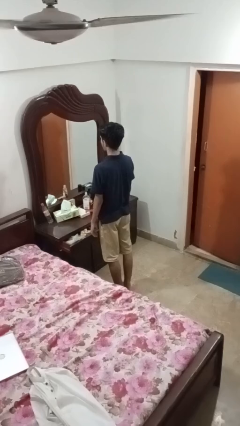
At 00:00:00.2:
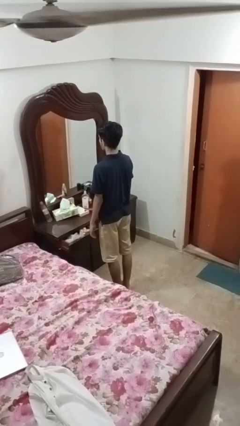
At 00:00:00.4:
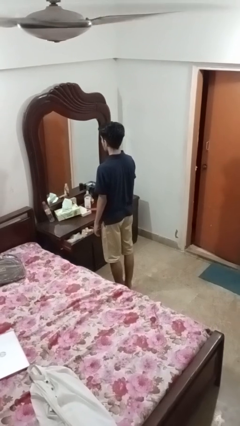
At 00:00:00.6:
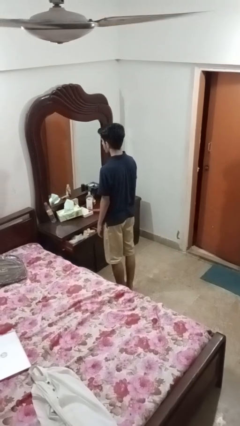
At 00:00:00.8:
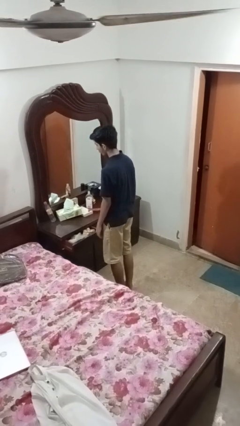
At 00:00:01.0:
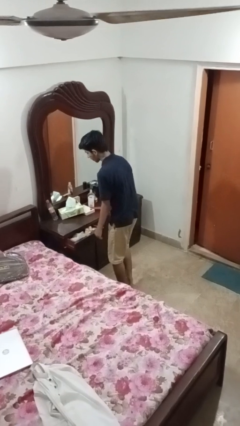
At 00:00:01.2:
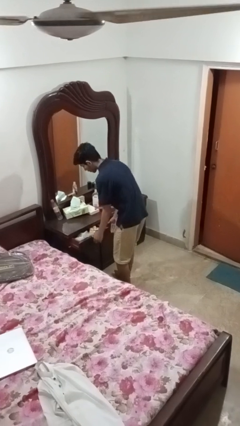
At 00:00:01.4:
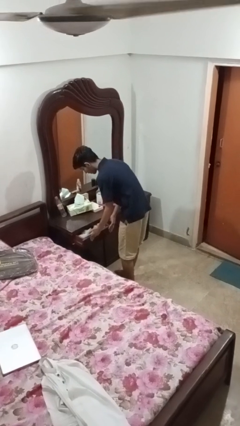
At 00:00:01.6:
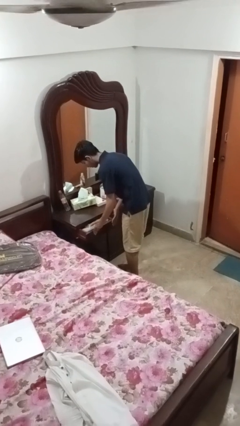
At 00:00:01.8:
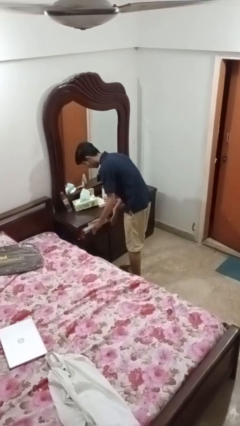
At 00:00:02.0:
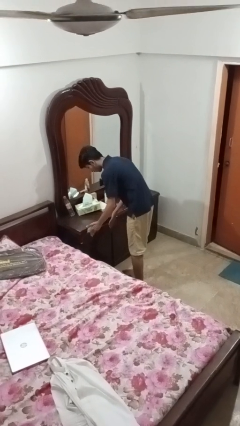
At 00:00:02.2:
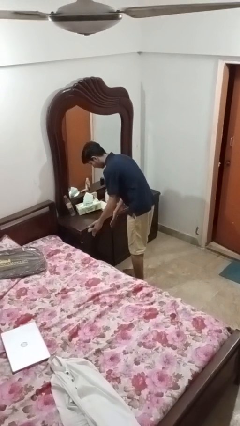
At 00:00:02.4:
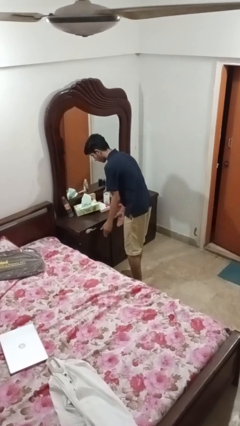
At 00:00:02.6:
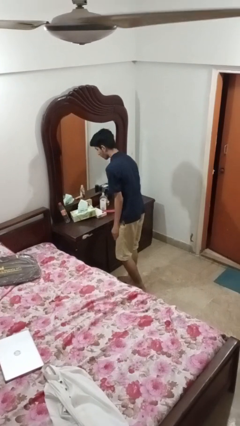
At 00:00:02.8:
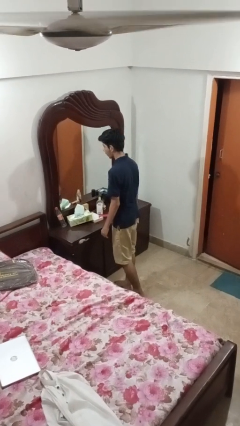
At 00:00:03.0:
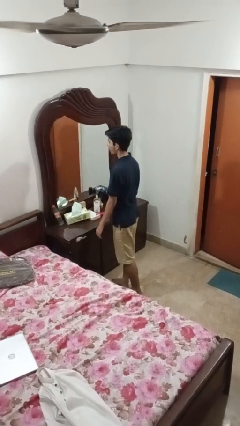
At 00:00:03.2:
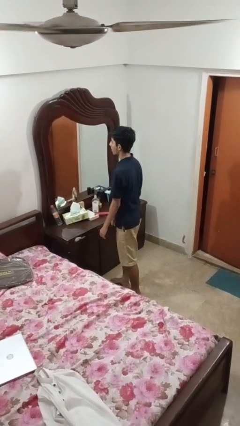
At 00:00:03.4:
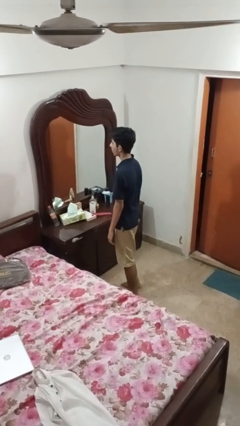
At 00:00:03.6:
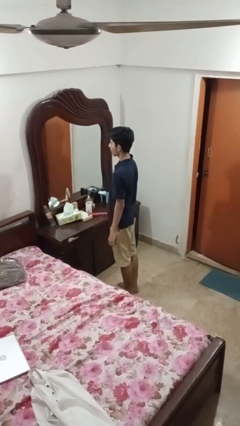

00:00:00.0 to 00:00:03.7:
person closes dresser drawer

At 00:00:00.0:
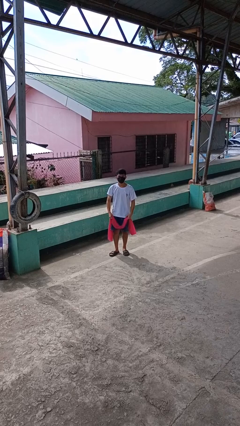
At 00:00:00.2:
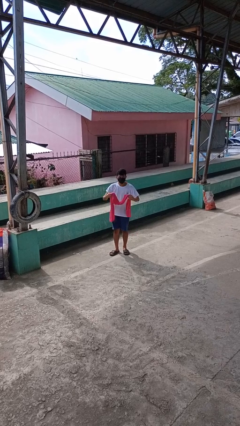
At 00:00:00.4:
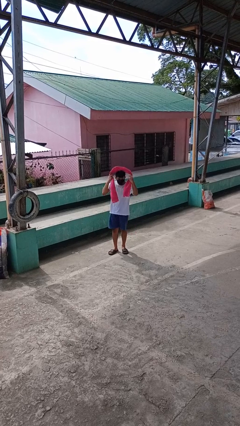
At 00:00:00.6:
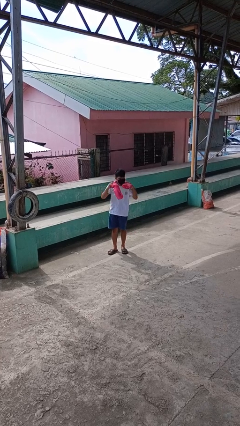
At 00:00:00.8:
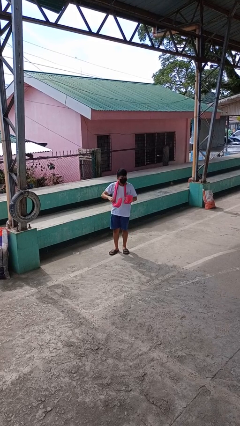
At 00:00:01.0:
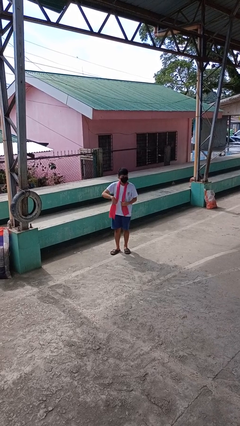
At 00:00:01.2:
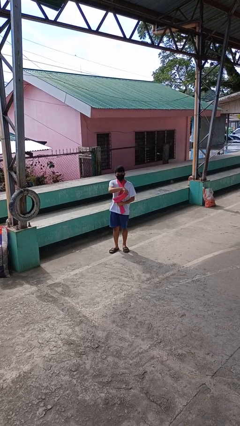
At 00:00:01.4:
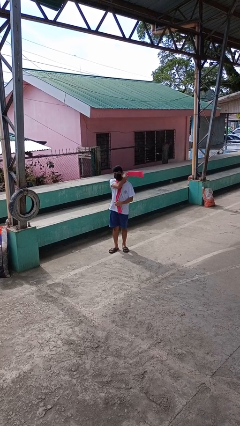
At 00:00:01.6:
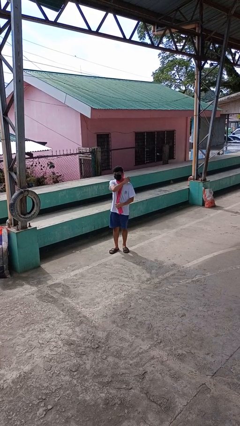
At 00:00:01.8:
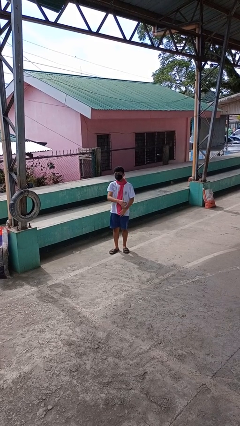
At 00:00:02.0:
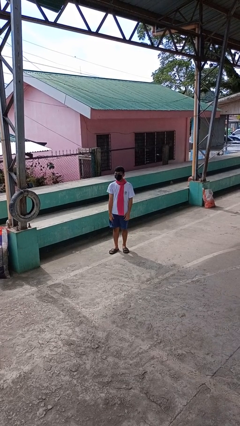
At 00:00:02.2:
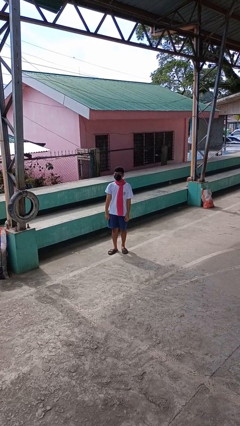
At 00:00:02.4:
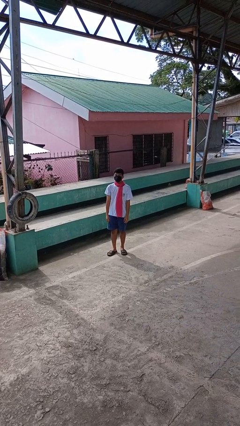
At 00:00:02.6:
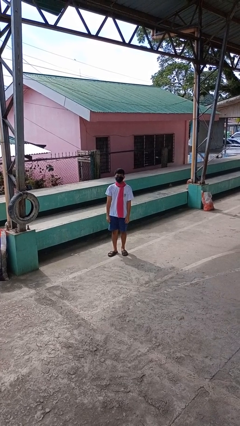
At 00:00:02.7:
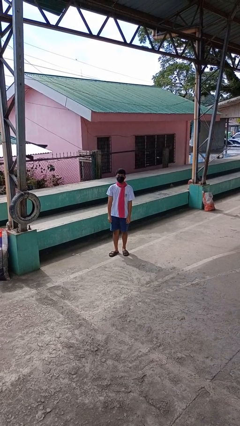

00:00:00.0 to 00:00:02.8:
person puts on scarf

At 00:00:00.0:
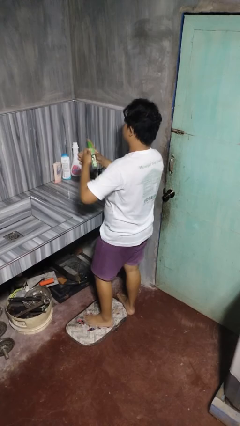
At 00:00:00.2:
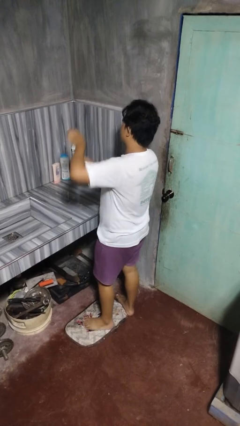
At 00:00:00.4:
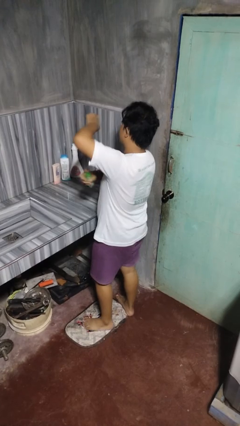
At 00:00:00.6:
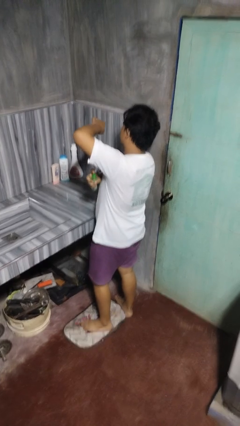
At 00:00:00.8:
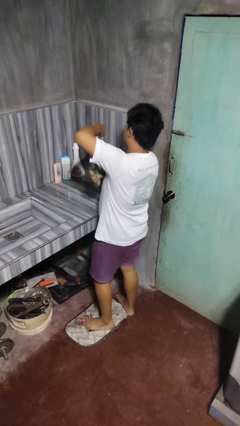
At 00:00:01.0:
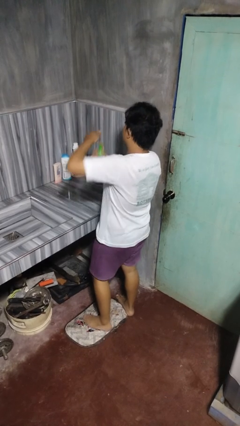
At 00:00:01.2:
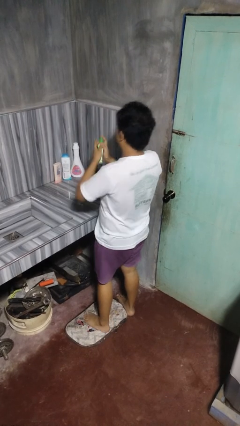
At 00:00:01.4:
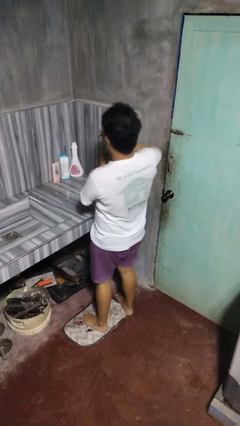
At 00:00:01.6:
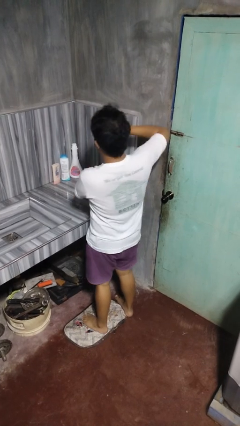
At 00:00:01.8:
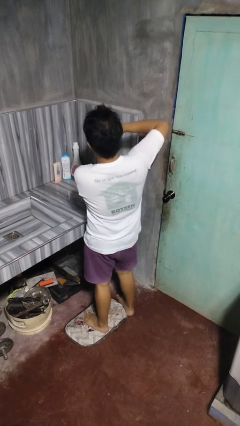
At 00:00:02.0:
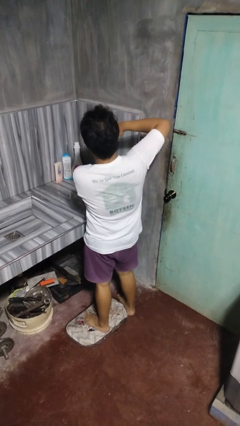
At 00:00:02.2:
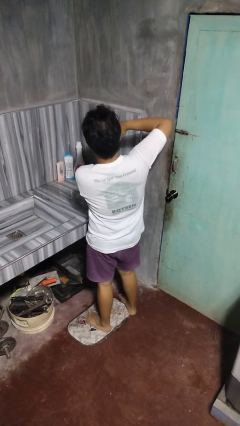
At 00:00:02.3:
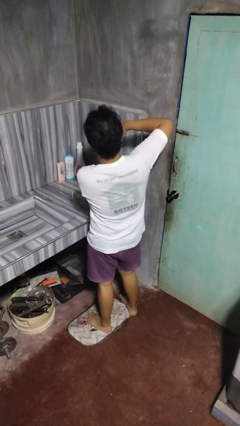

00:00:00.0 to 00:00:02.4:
person applies deodorant

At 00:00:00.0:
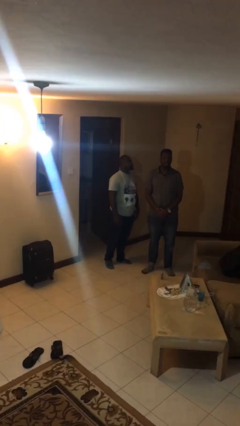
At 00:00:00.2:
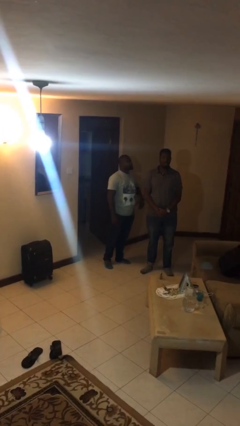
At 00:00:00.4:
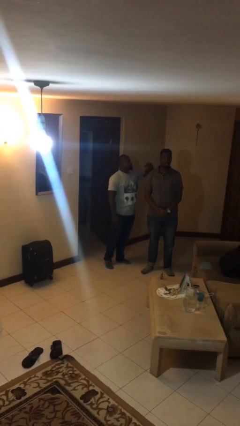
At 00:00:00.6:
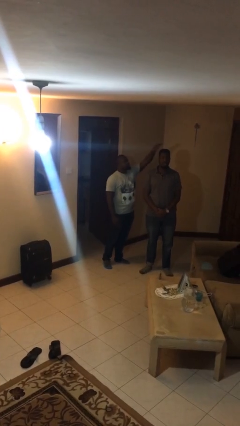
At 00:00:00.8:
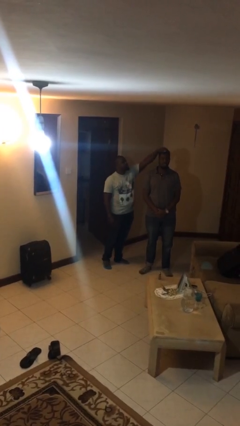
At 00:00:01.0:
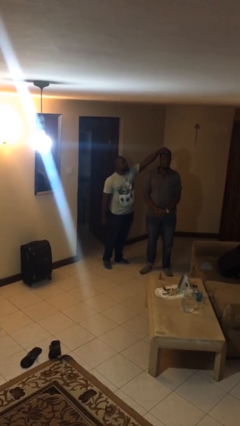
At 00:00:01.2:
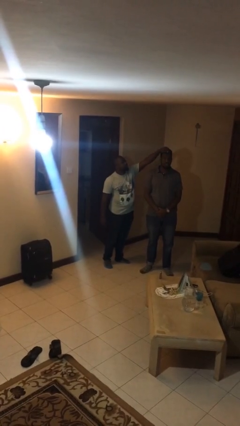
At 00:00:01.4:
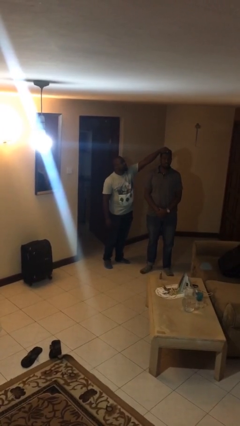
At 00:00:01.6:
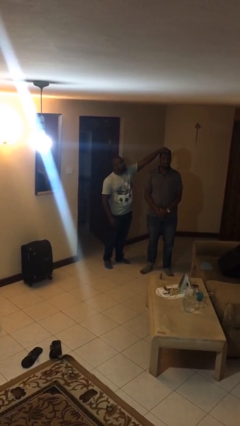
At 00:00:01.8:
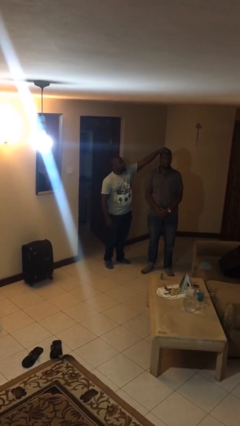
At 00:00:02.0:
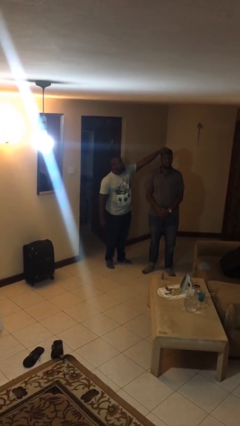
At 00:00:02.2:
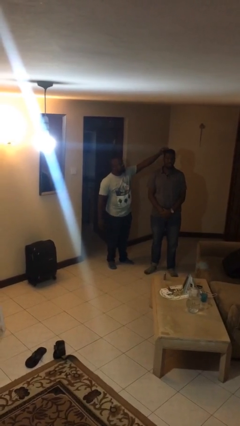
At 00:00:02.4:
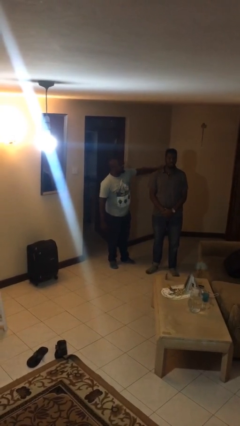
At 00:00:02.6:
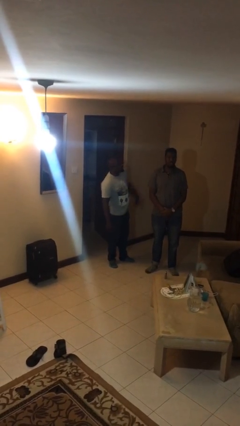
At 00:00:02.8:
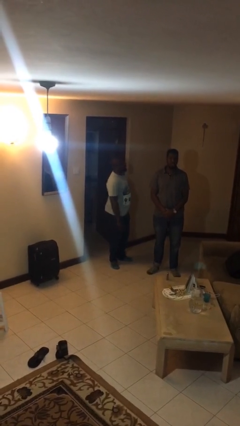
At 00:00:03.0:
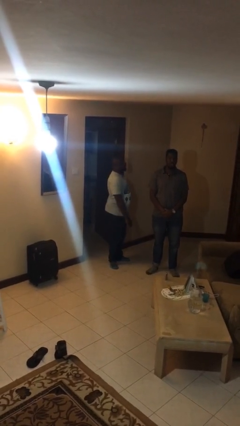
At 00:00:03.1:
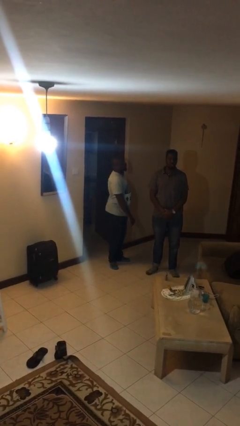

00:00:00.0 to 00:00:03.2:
person grabs person by hair

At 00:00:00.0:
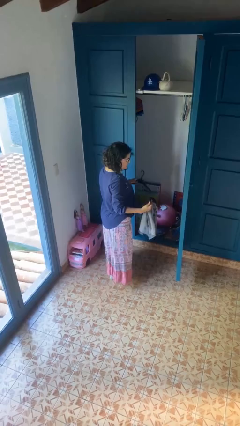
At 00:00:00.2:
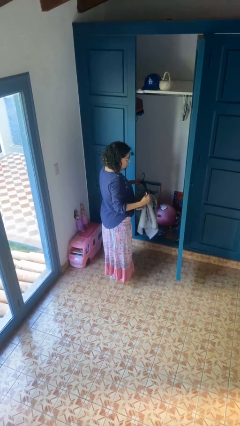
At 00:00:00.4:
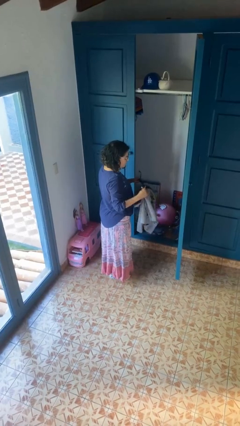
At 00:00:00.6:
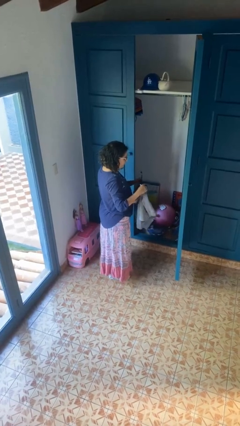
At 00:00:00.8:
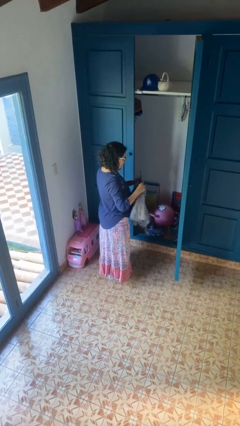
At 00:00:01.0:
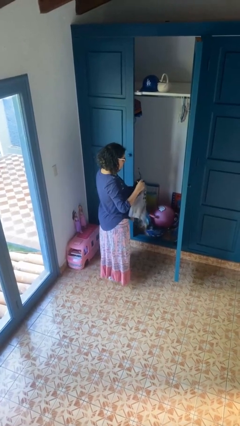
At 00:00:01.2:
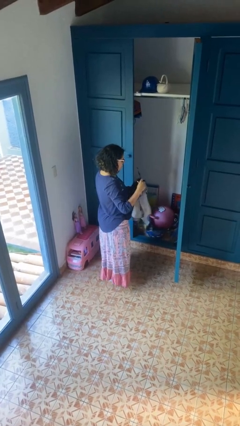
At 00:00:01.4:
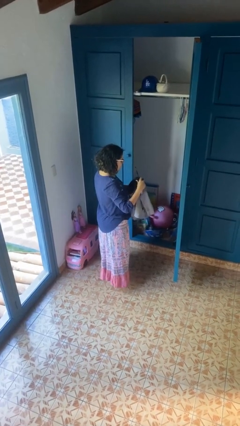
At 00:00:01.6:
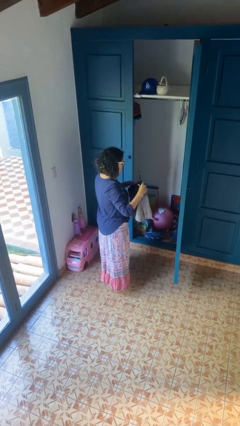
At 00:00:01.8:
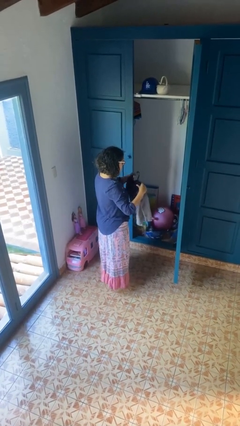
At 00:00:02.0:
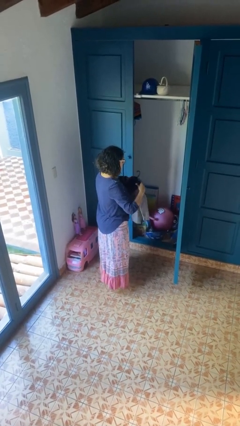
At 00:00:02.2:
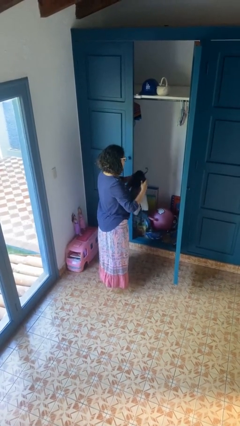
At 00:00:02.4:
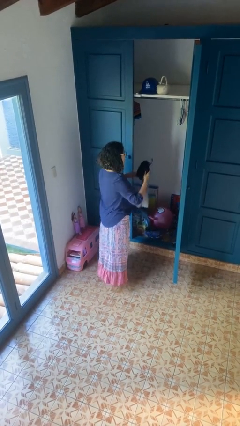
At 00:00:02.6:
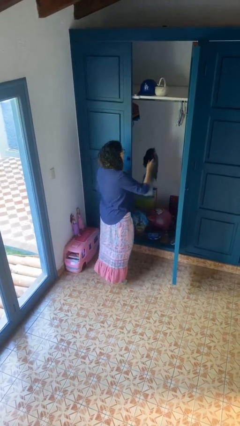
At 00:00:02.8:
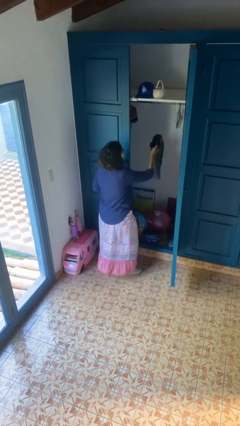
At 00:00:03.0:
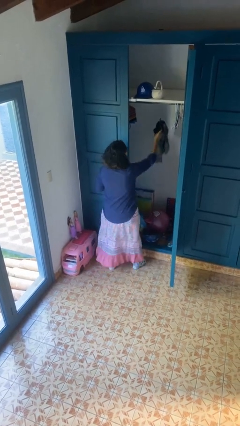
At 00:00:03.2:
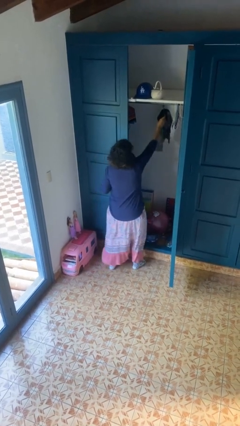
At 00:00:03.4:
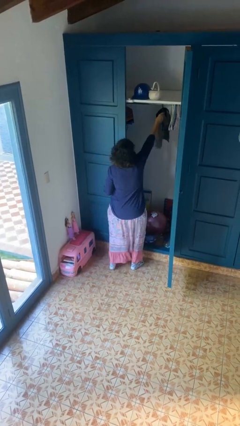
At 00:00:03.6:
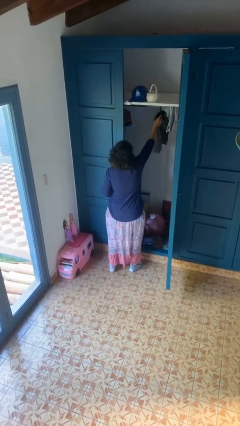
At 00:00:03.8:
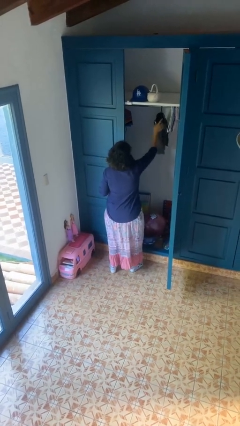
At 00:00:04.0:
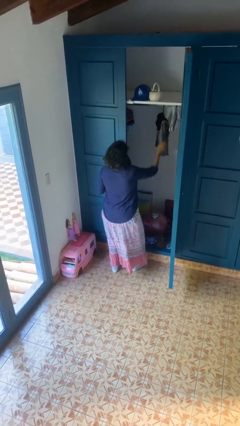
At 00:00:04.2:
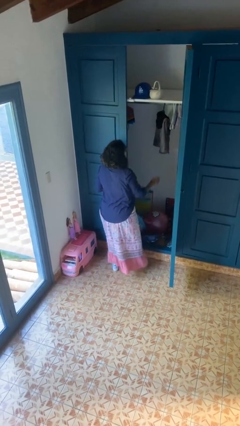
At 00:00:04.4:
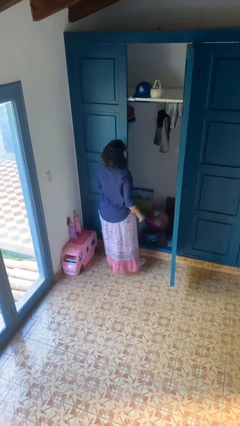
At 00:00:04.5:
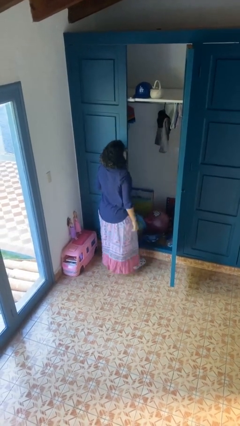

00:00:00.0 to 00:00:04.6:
person puts clothes into closet

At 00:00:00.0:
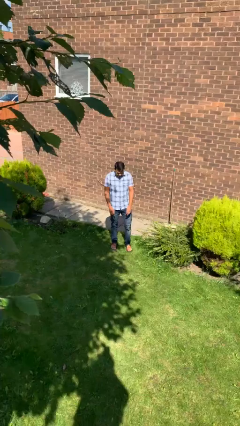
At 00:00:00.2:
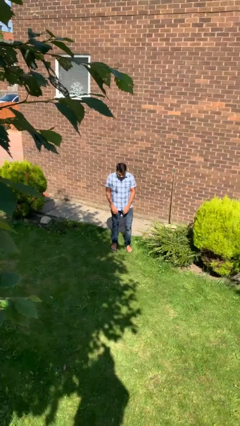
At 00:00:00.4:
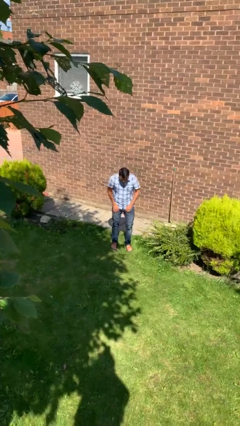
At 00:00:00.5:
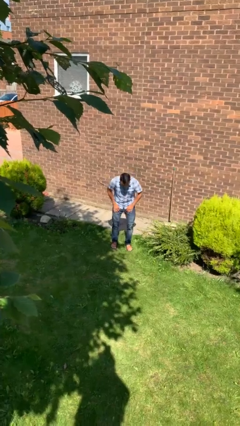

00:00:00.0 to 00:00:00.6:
person stands up from floor
